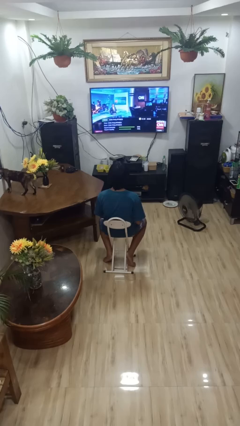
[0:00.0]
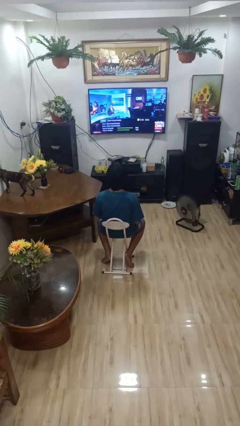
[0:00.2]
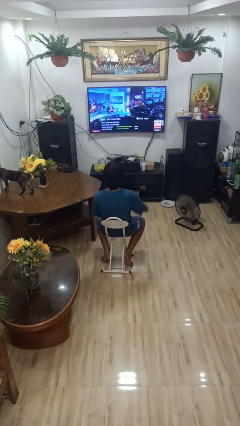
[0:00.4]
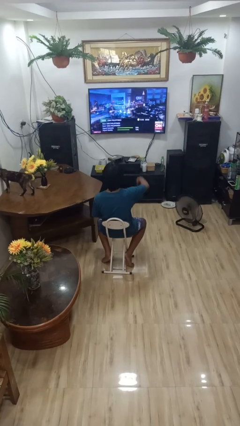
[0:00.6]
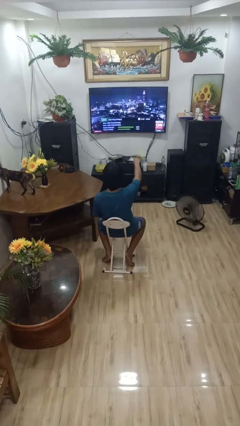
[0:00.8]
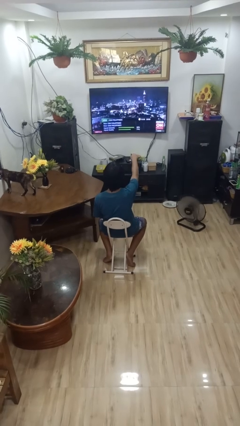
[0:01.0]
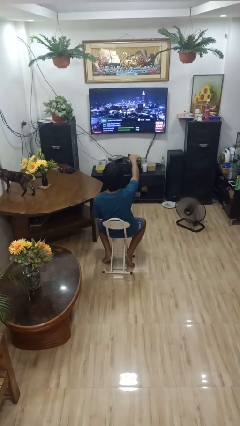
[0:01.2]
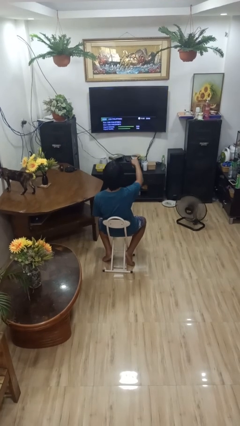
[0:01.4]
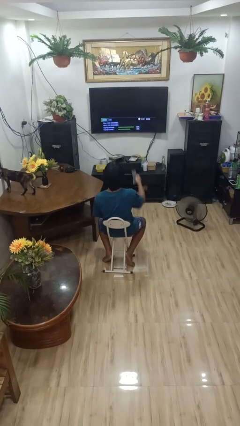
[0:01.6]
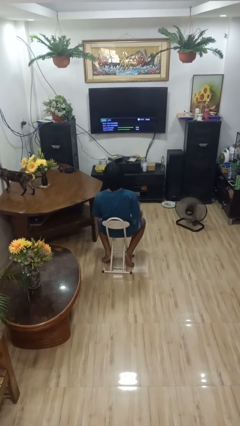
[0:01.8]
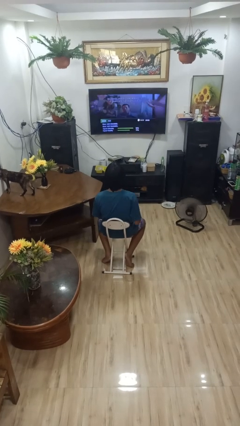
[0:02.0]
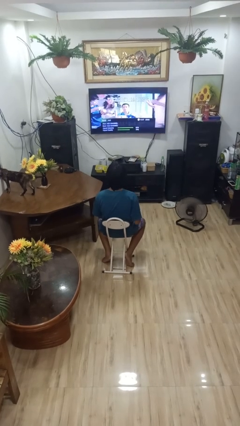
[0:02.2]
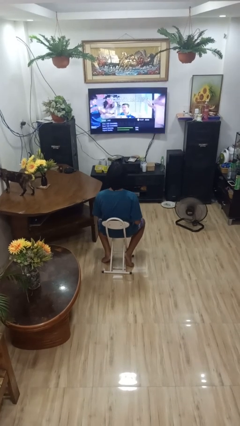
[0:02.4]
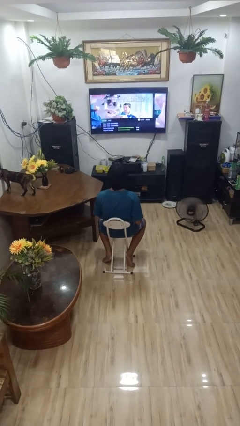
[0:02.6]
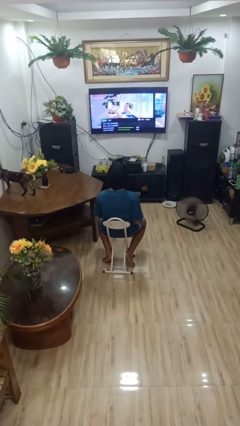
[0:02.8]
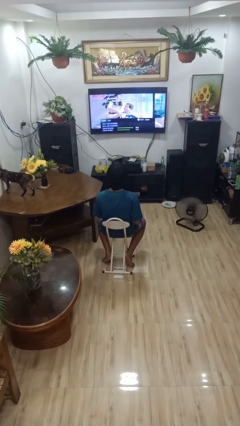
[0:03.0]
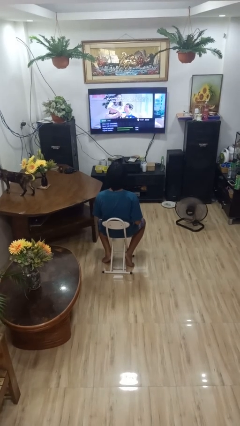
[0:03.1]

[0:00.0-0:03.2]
person uses television remote

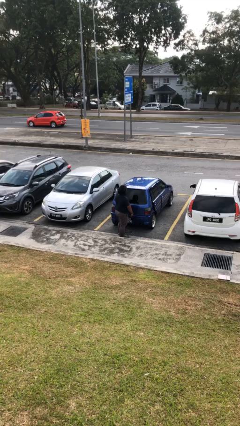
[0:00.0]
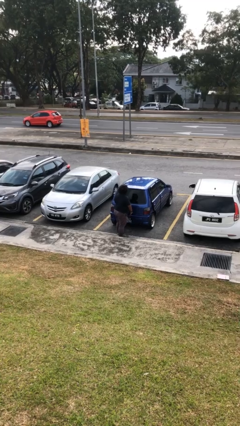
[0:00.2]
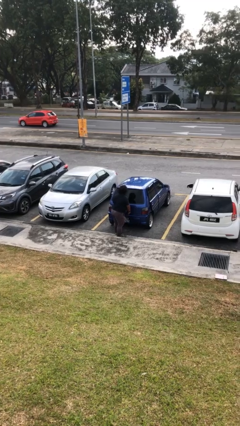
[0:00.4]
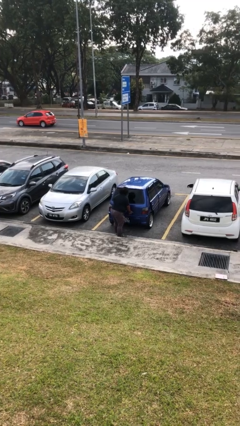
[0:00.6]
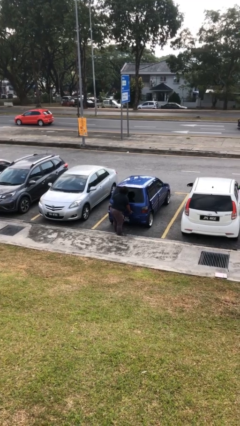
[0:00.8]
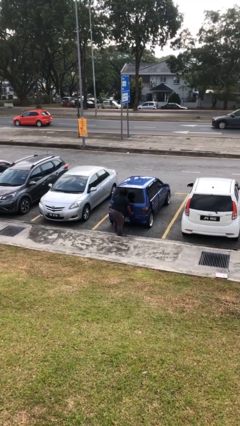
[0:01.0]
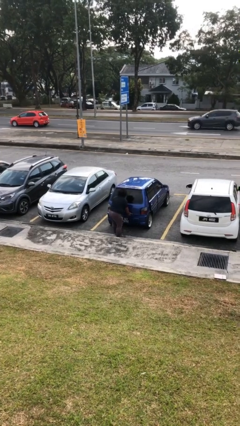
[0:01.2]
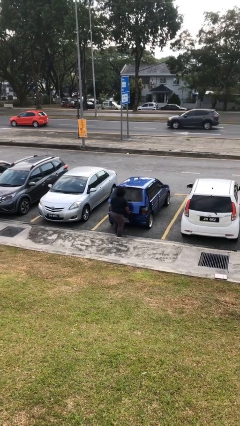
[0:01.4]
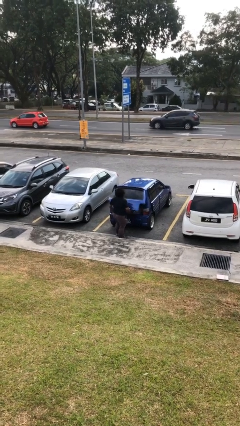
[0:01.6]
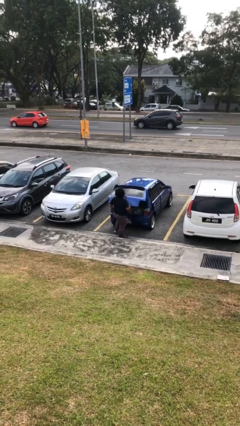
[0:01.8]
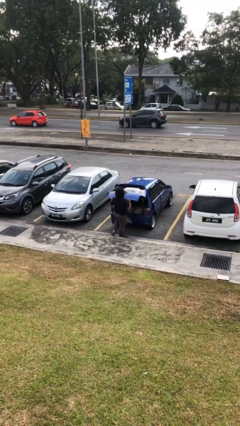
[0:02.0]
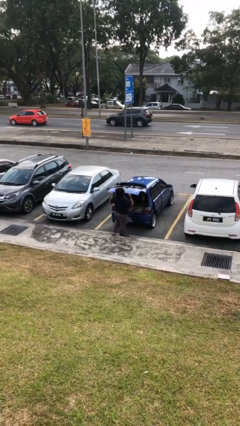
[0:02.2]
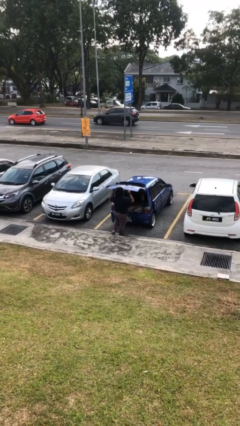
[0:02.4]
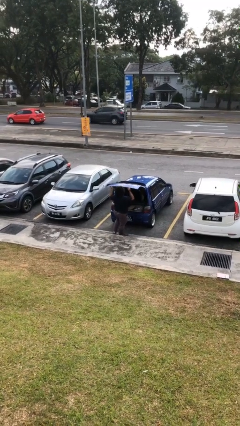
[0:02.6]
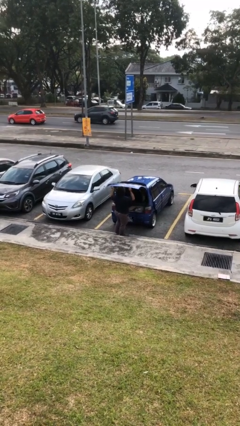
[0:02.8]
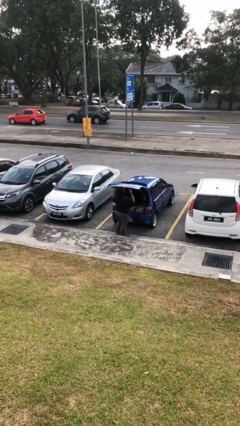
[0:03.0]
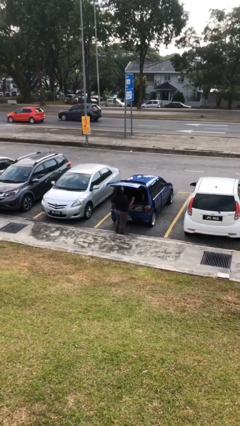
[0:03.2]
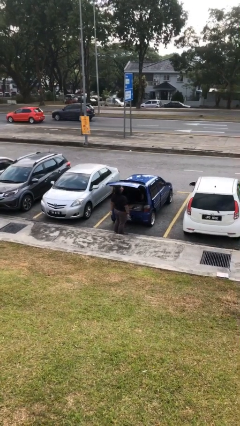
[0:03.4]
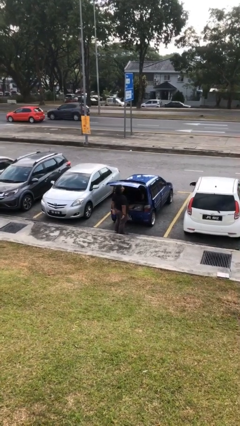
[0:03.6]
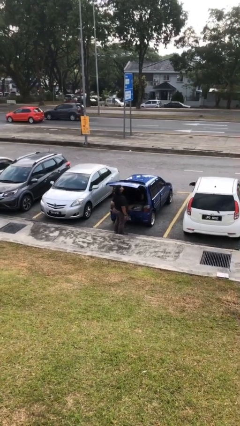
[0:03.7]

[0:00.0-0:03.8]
person opens car trunk

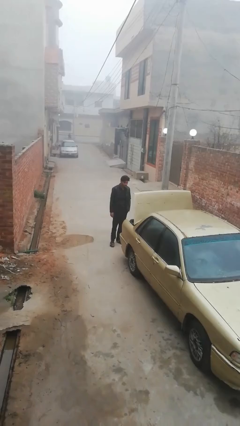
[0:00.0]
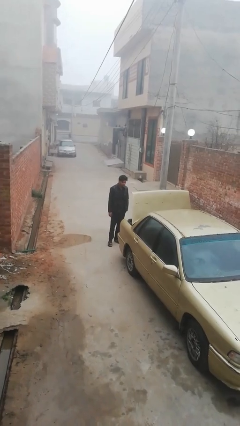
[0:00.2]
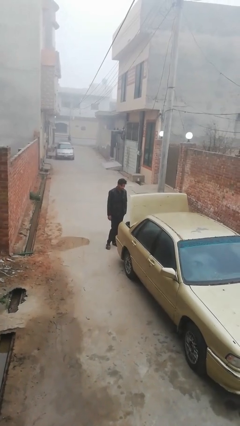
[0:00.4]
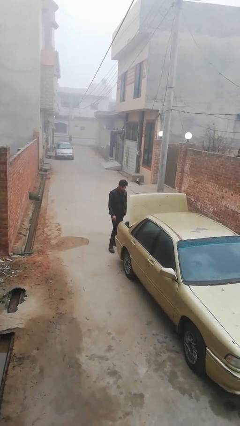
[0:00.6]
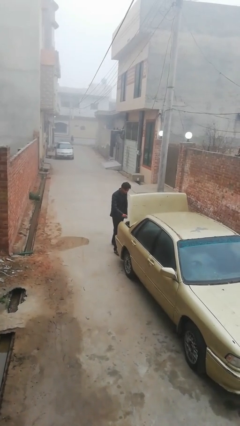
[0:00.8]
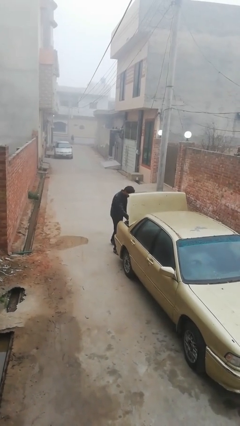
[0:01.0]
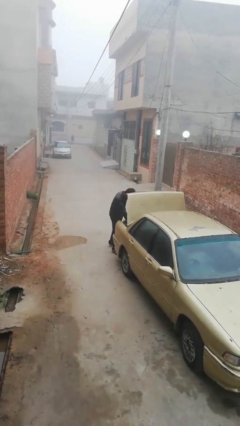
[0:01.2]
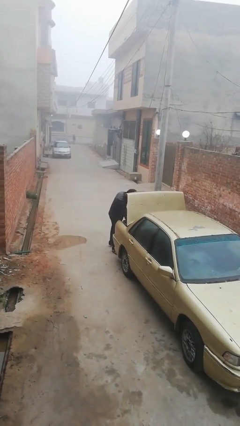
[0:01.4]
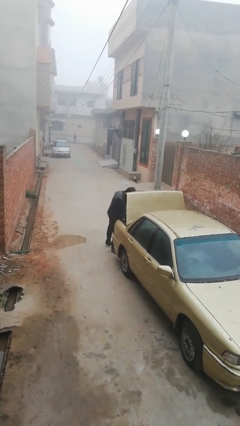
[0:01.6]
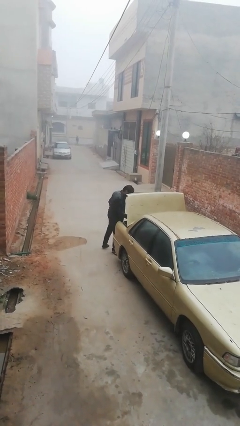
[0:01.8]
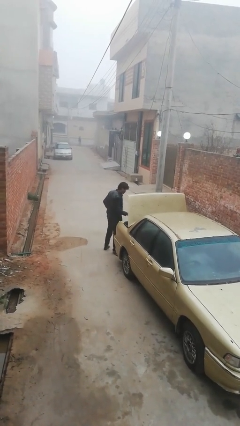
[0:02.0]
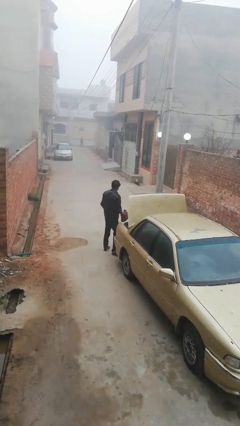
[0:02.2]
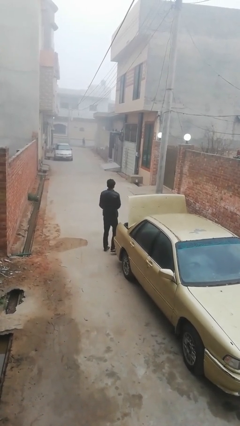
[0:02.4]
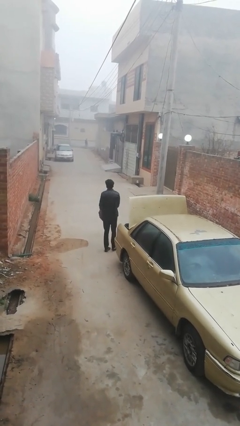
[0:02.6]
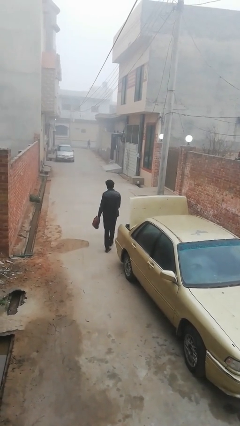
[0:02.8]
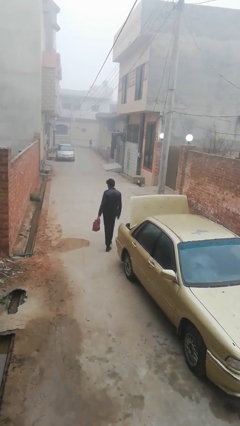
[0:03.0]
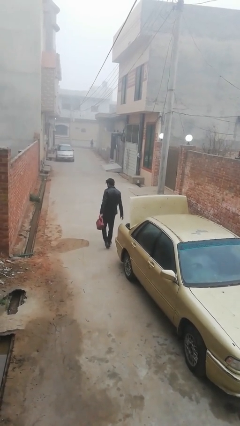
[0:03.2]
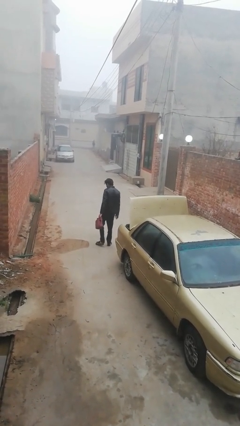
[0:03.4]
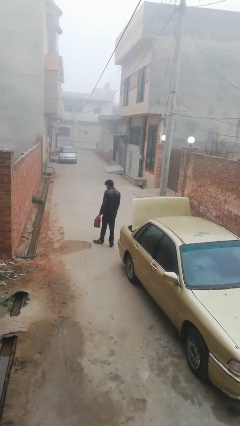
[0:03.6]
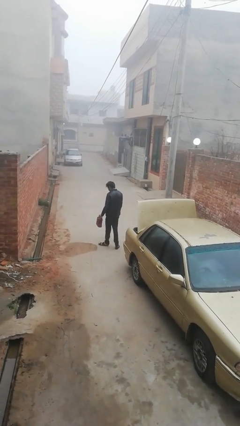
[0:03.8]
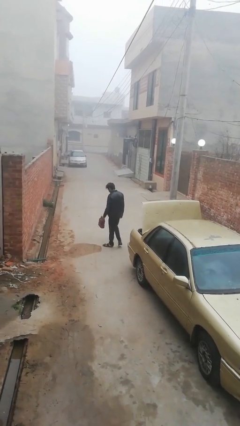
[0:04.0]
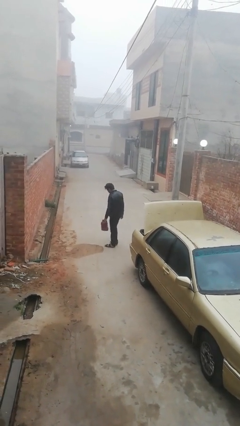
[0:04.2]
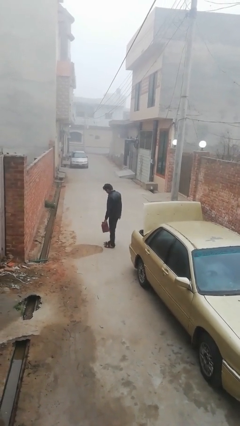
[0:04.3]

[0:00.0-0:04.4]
person unloads car

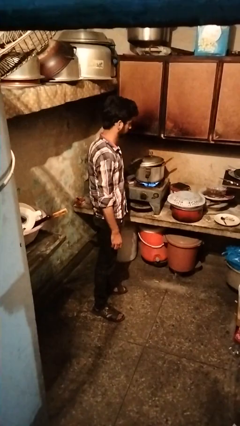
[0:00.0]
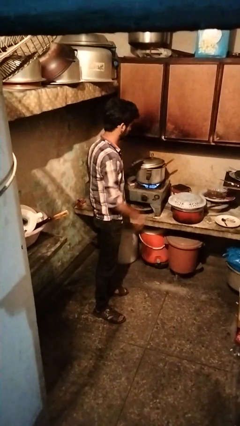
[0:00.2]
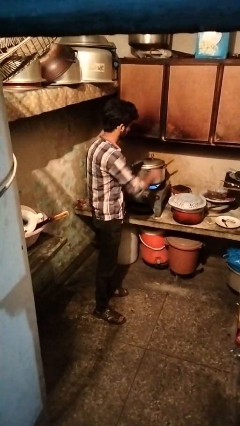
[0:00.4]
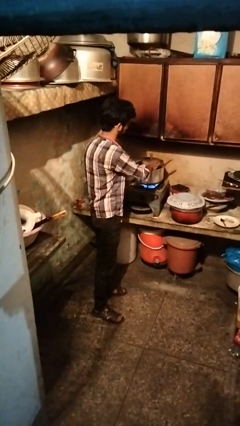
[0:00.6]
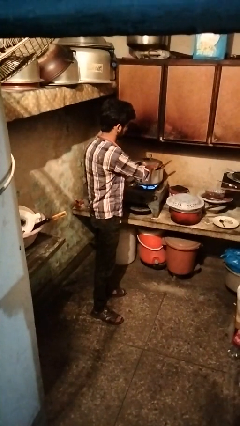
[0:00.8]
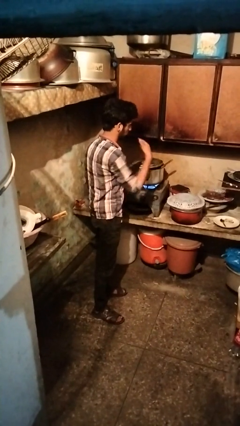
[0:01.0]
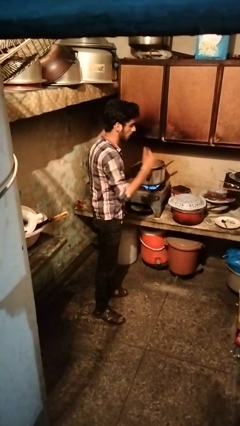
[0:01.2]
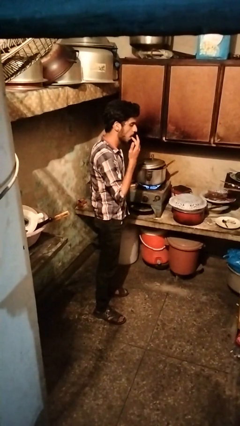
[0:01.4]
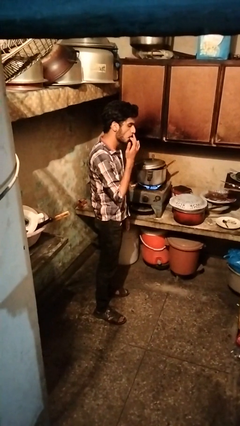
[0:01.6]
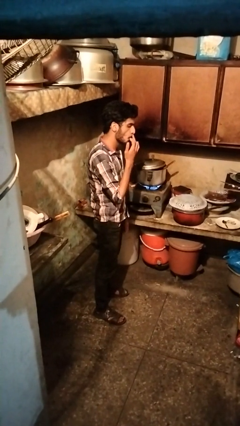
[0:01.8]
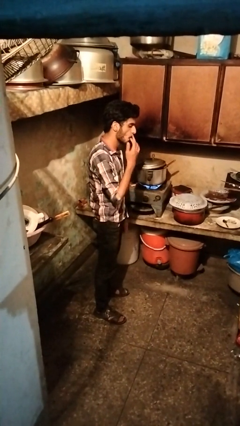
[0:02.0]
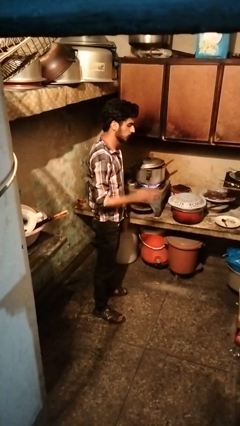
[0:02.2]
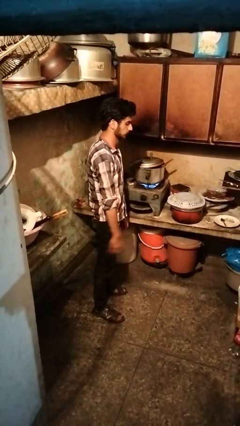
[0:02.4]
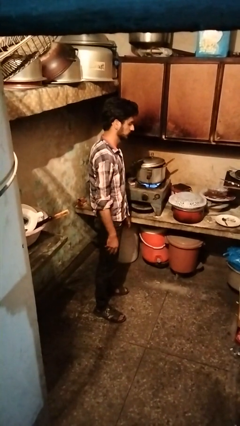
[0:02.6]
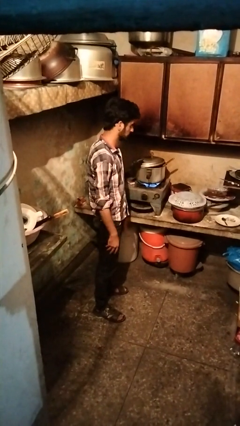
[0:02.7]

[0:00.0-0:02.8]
person burns hand

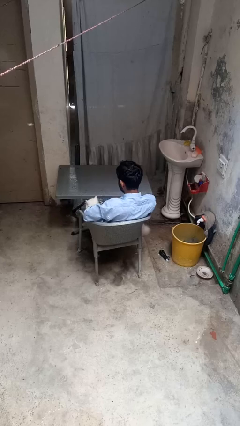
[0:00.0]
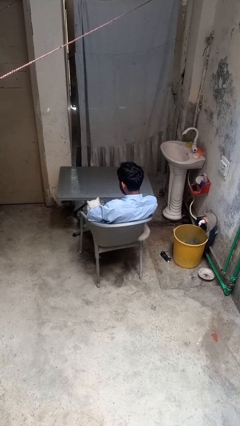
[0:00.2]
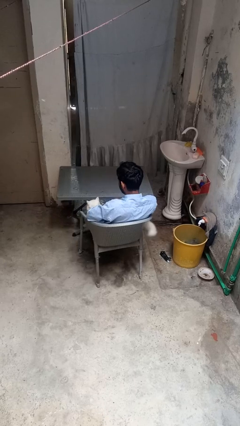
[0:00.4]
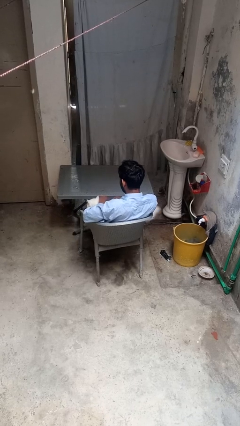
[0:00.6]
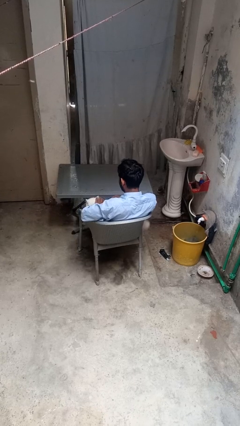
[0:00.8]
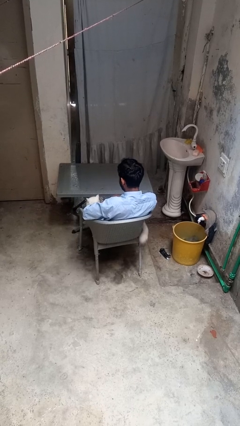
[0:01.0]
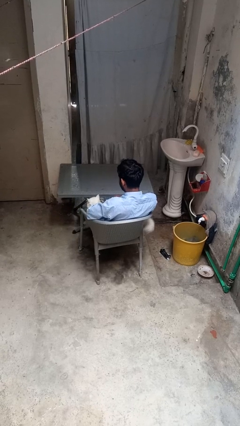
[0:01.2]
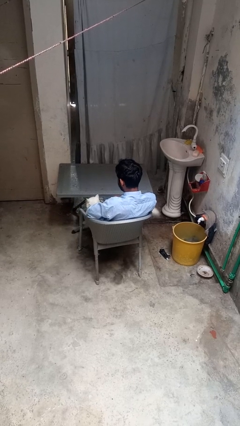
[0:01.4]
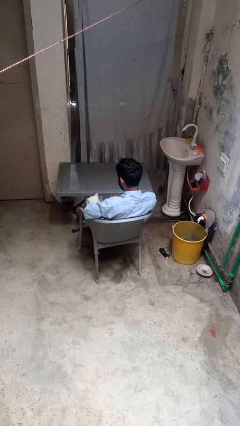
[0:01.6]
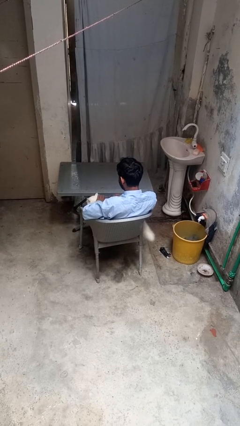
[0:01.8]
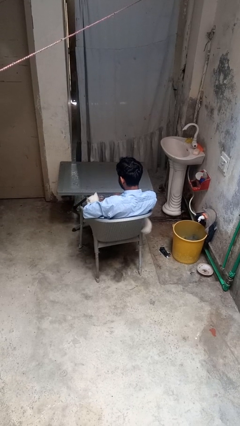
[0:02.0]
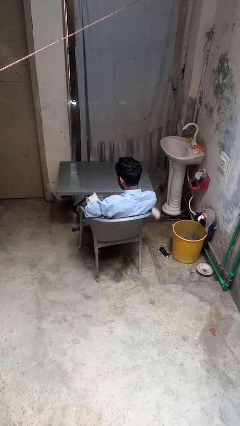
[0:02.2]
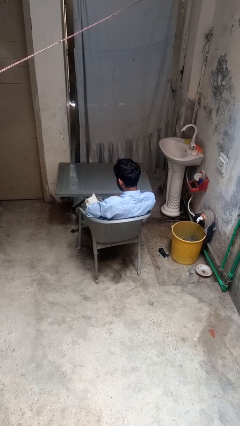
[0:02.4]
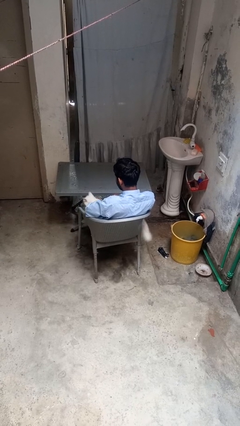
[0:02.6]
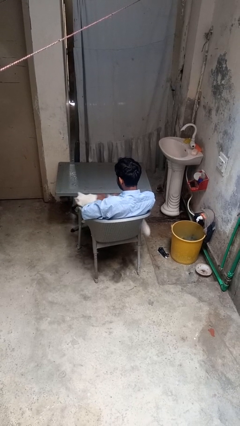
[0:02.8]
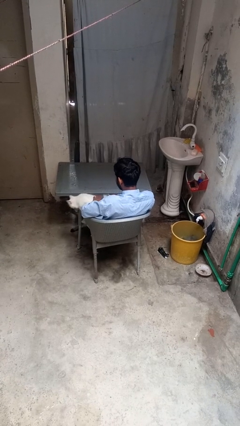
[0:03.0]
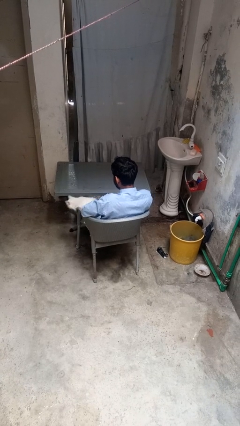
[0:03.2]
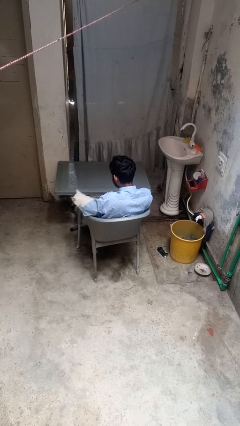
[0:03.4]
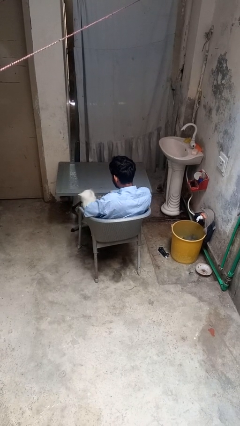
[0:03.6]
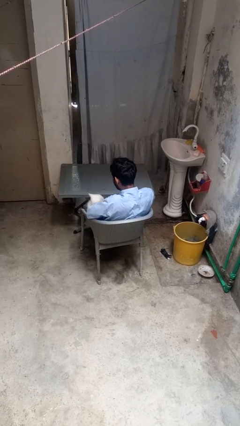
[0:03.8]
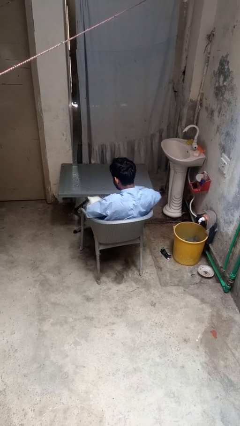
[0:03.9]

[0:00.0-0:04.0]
person pets cat
